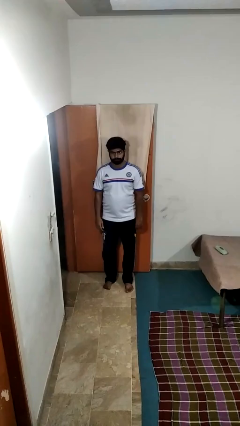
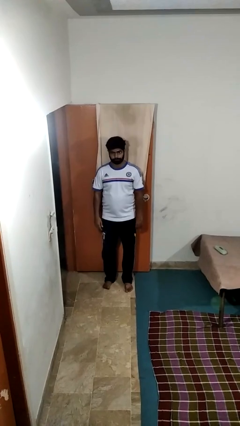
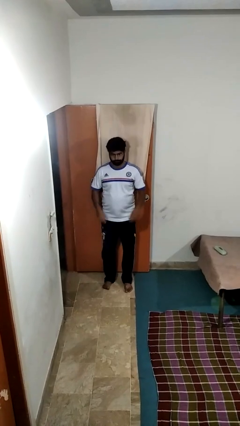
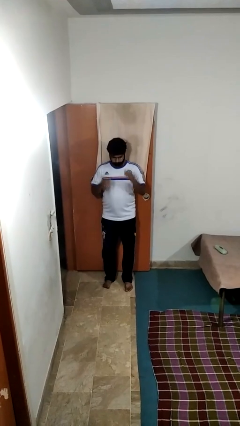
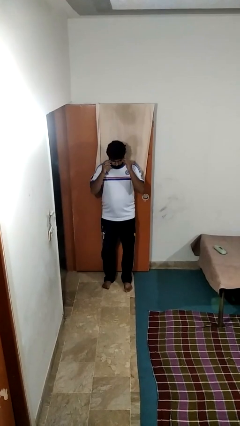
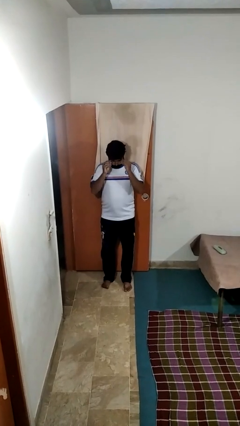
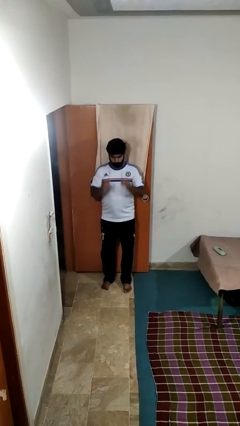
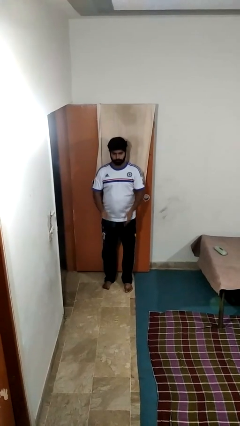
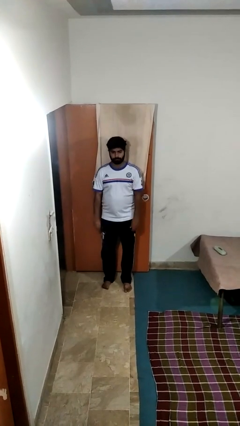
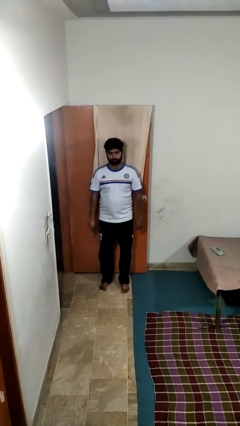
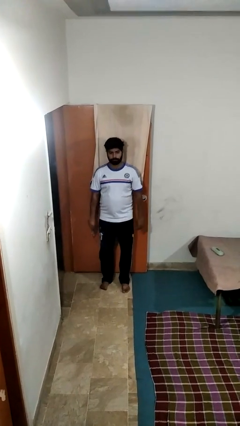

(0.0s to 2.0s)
person takes off glasses

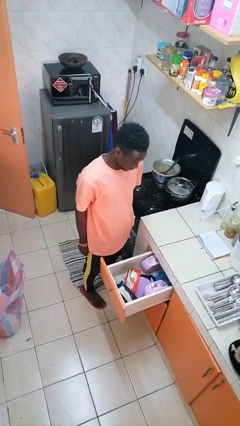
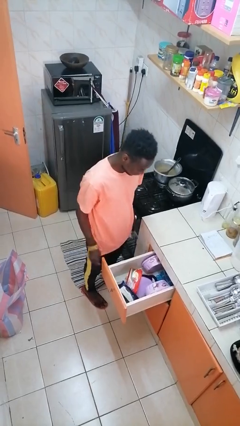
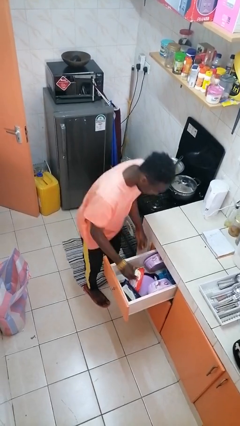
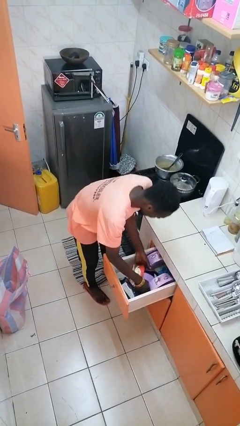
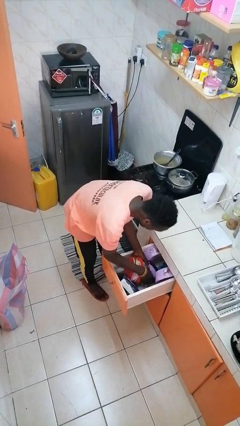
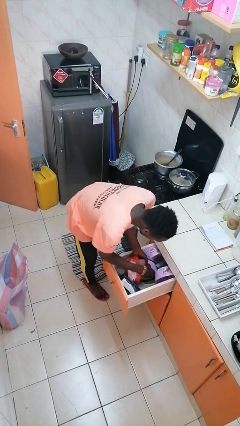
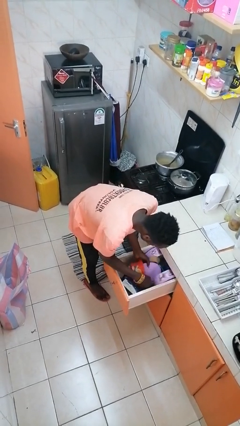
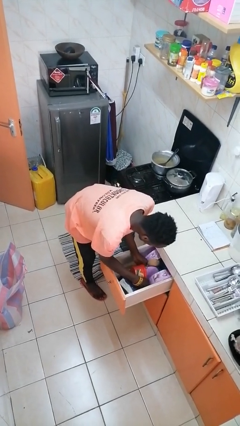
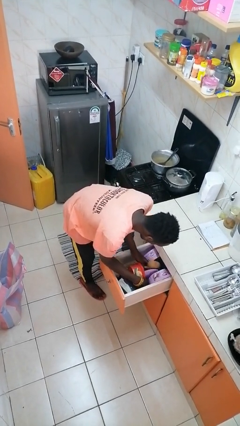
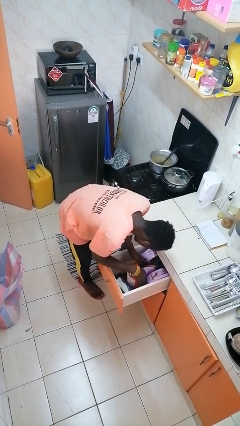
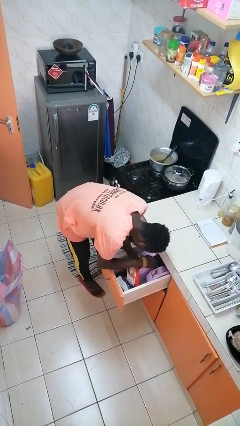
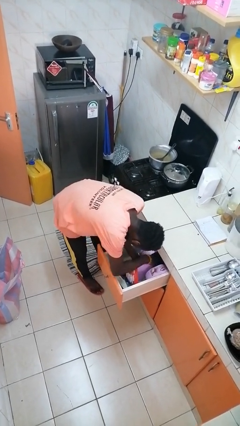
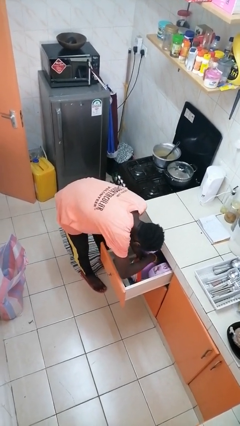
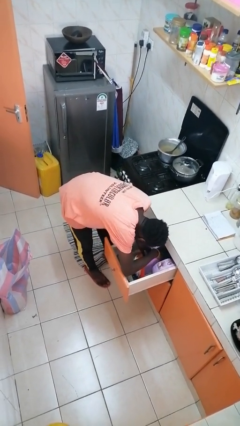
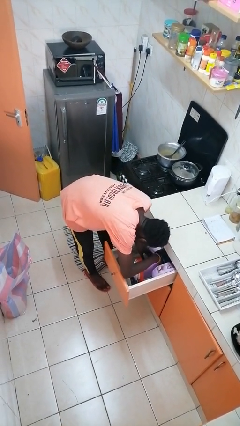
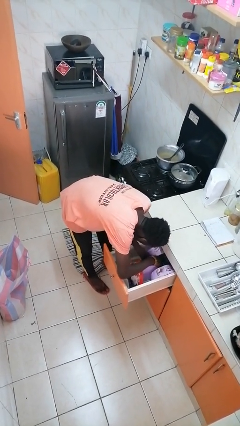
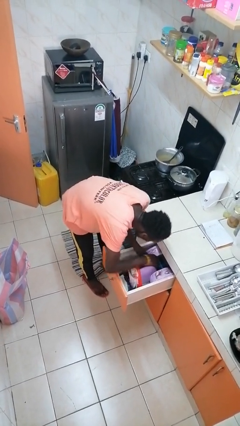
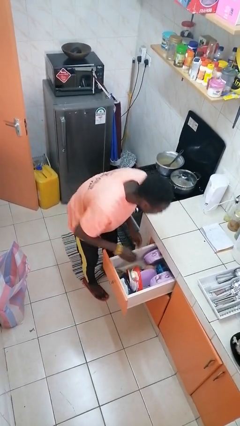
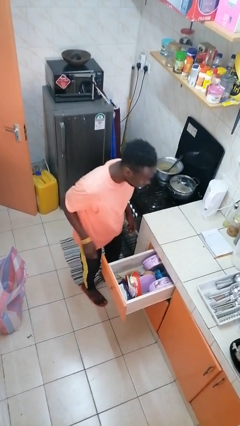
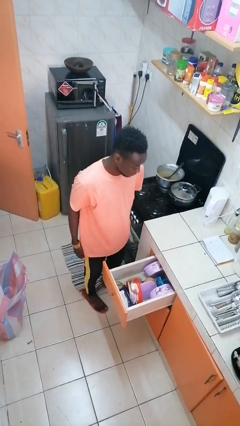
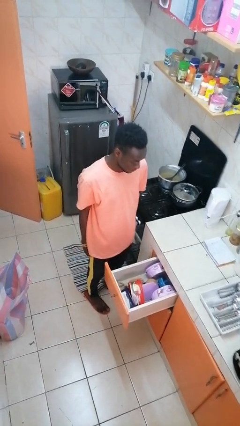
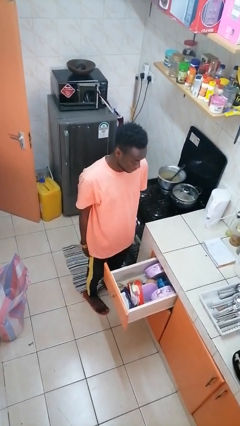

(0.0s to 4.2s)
person searches in kitchen drawer

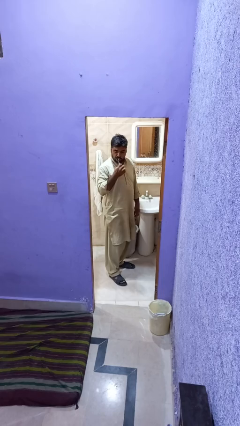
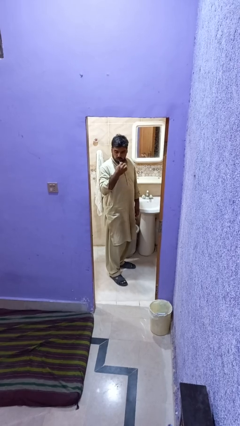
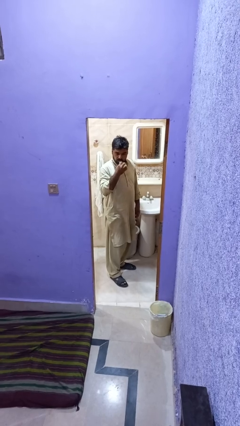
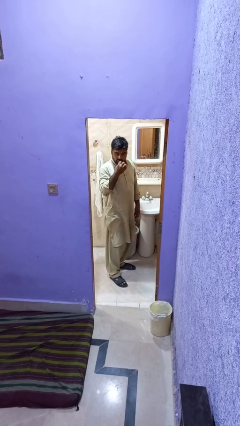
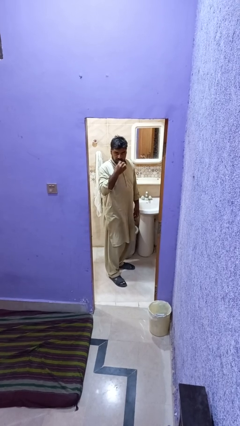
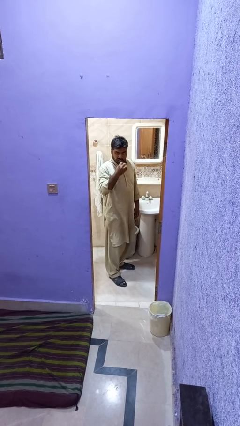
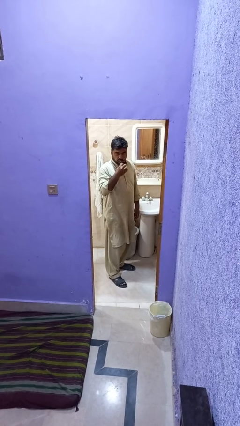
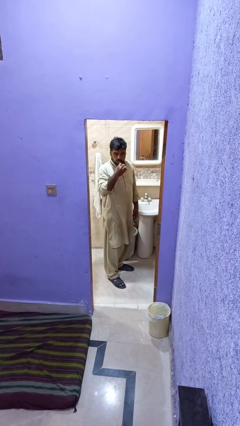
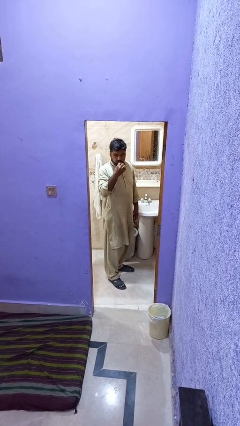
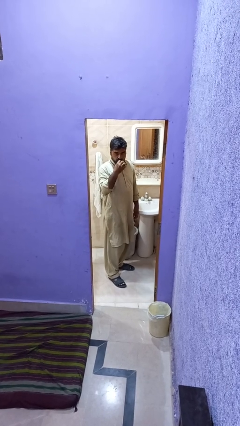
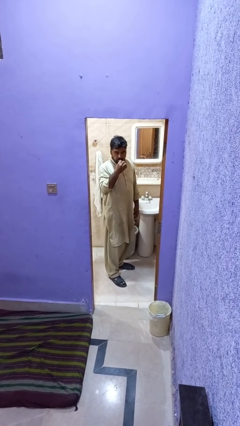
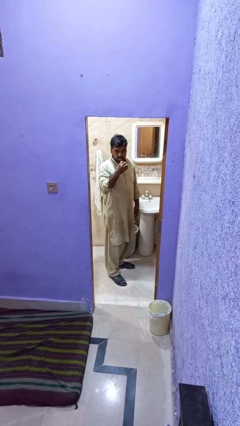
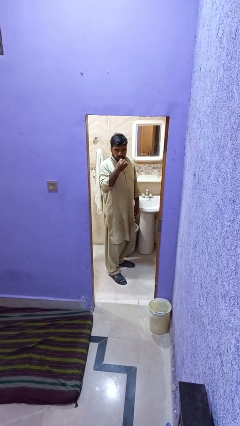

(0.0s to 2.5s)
person brushes teeth

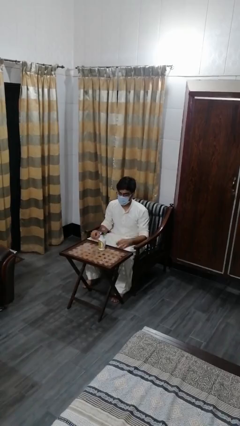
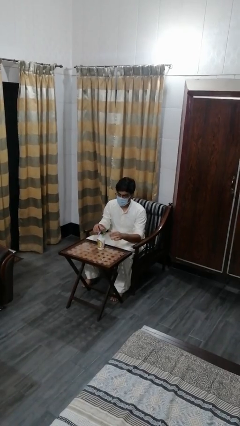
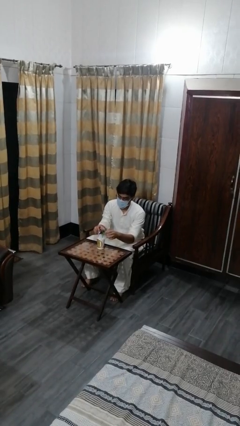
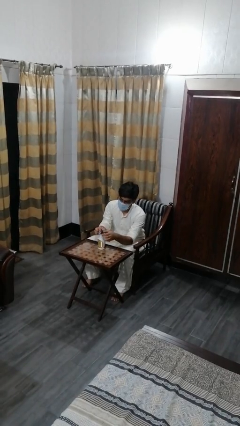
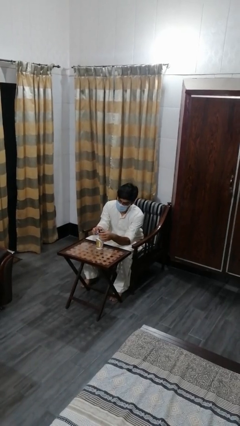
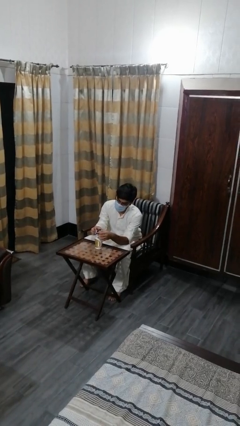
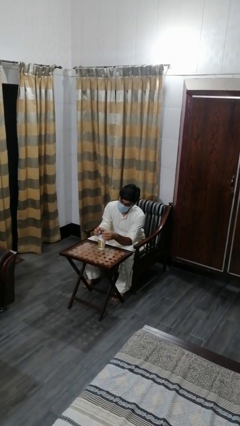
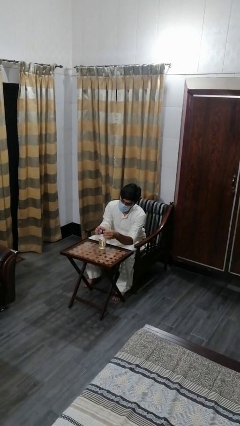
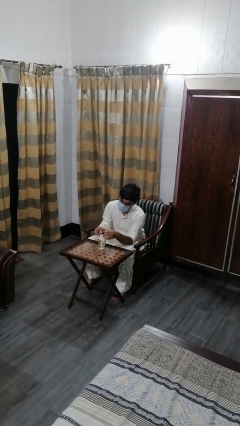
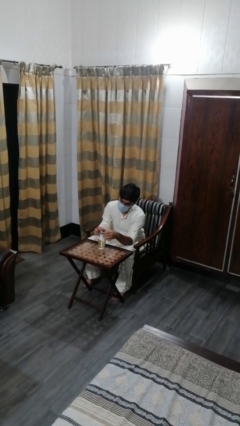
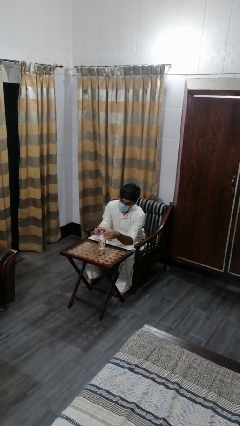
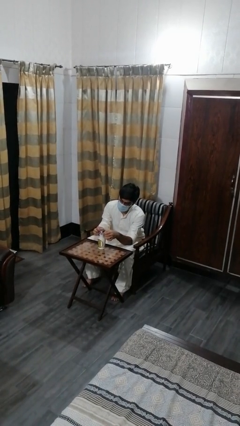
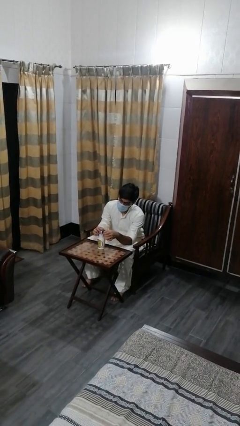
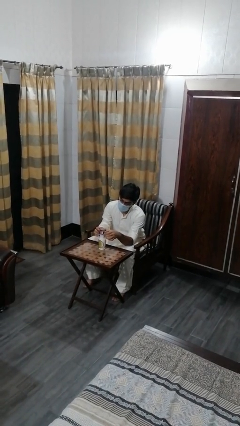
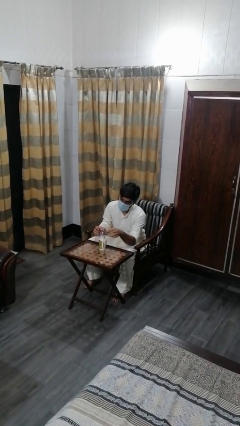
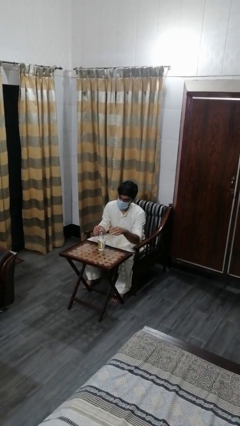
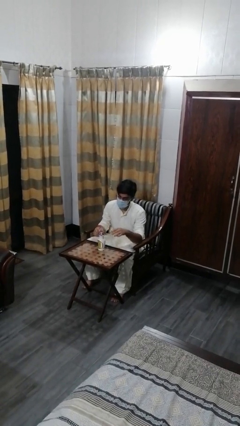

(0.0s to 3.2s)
person arranges flowers in vase

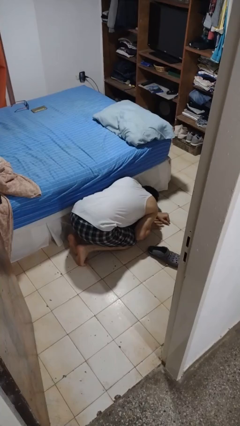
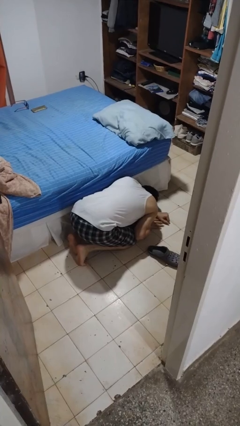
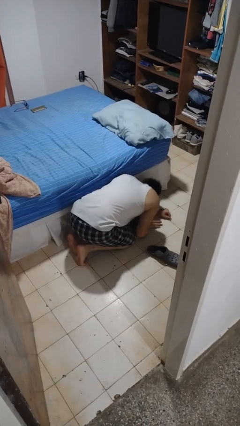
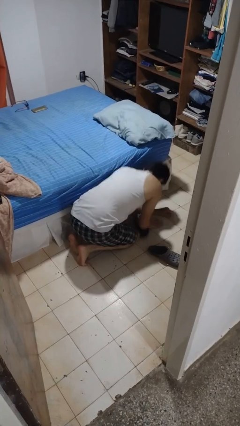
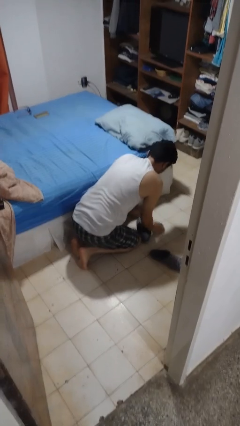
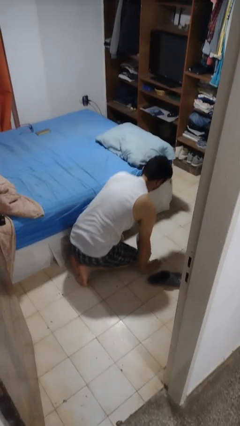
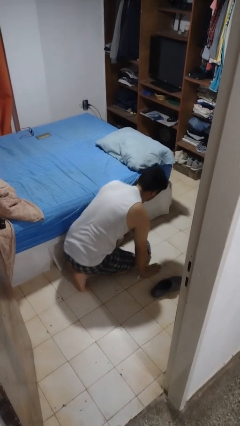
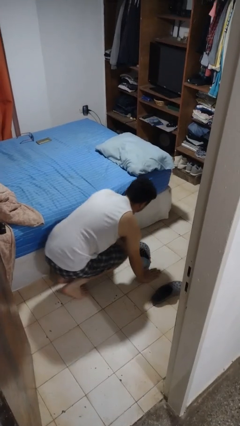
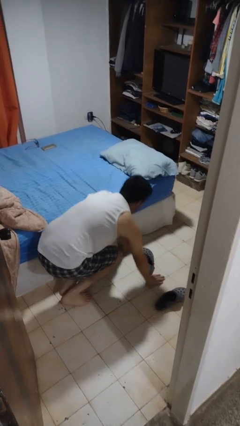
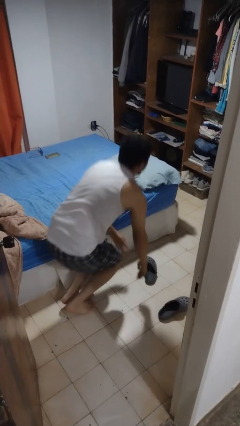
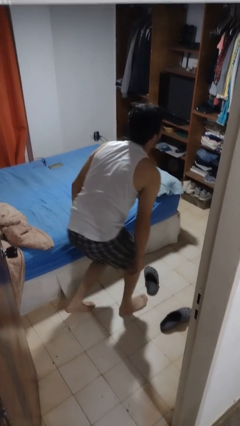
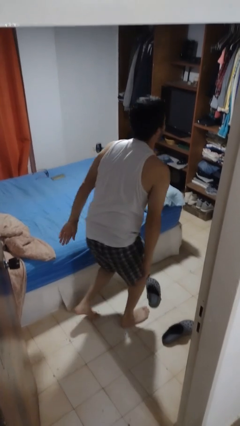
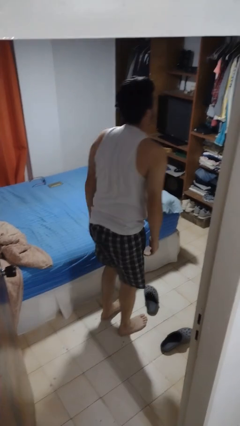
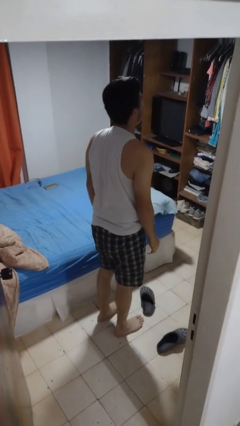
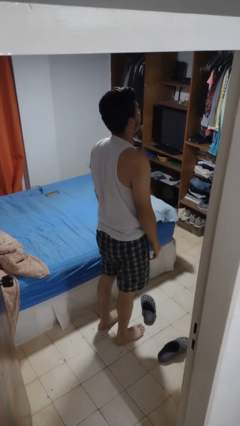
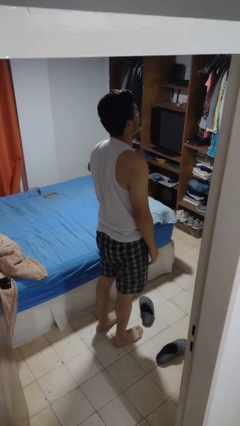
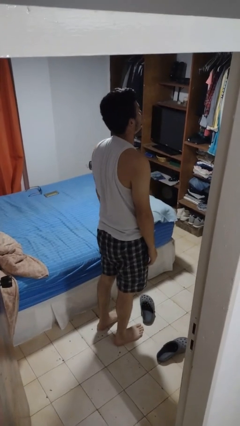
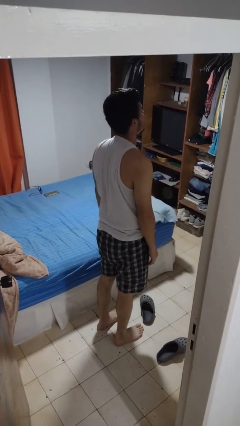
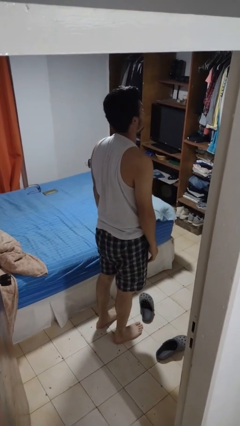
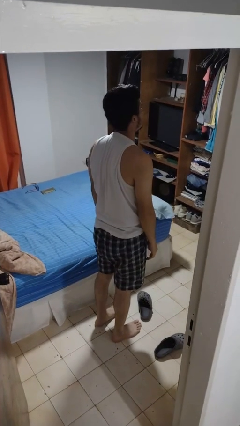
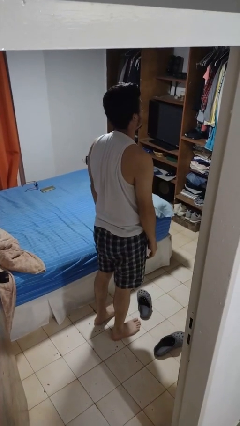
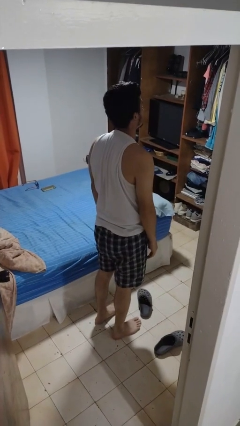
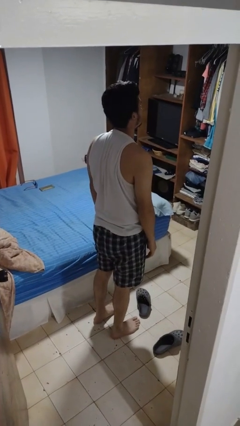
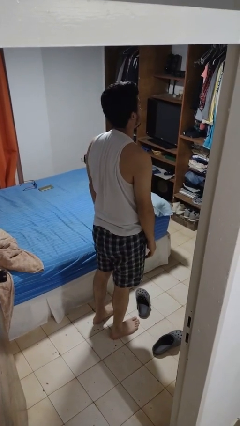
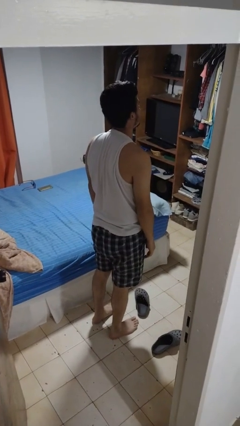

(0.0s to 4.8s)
person stands up from floor

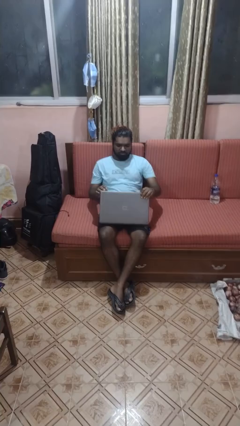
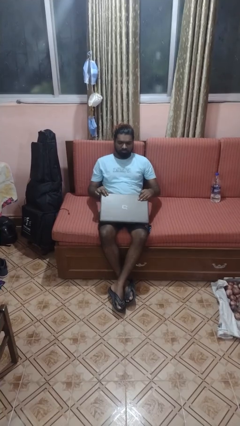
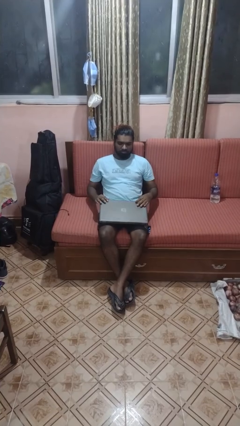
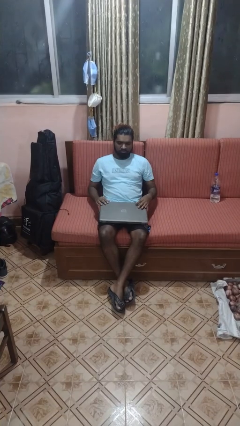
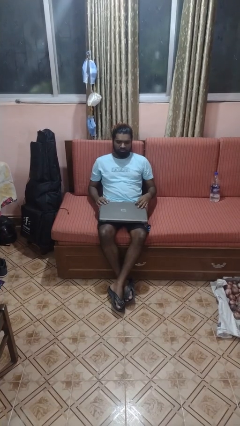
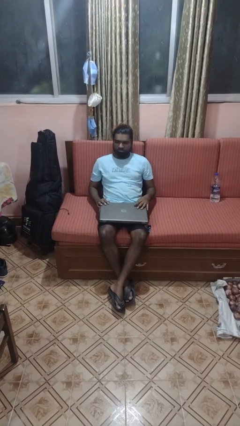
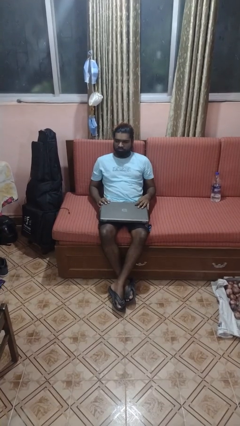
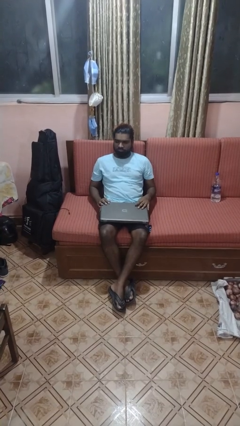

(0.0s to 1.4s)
person closes laptop
